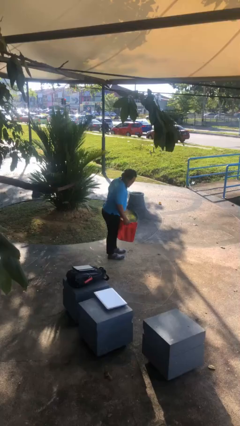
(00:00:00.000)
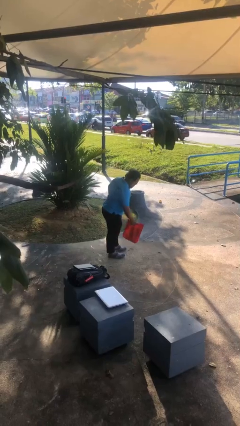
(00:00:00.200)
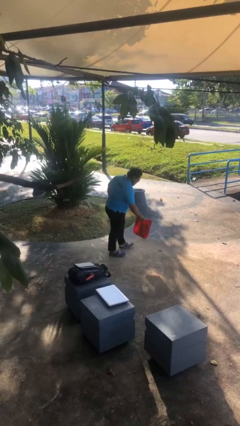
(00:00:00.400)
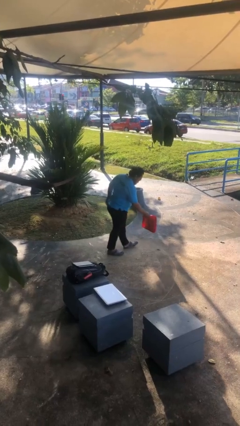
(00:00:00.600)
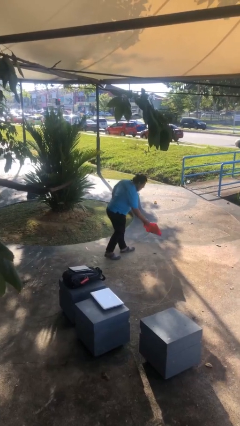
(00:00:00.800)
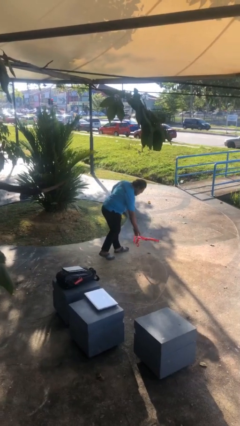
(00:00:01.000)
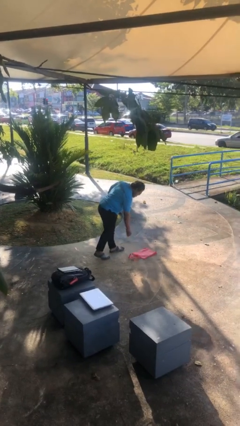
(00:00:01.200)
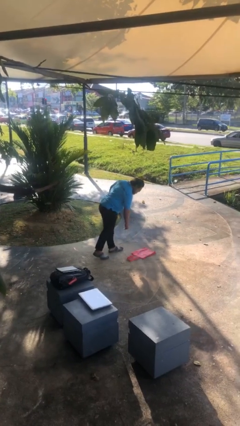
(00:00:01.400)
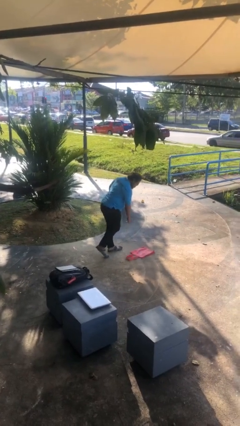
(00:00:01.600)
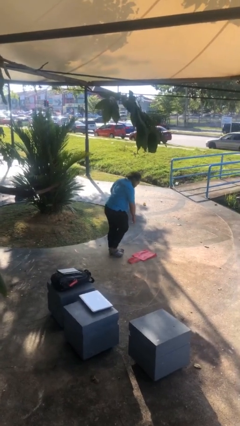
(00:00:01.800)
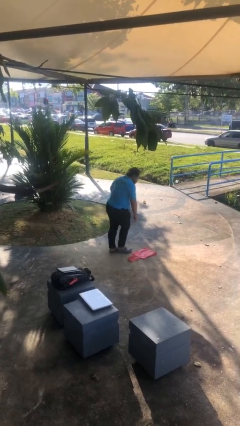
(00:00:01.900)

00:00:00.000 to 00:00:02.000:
person puts down object on floor

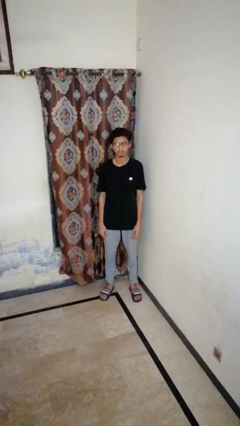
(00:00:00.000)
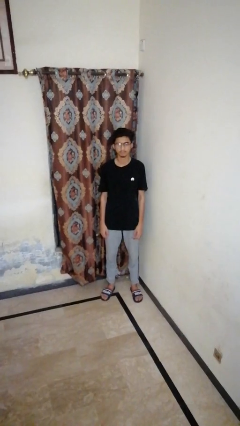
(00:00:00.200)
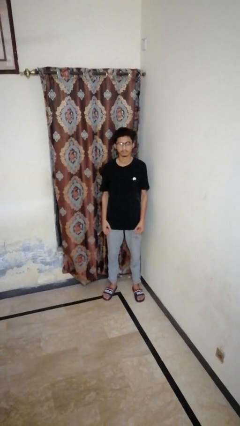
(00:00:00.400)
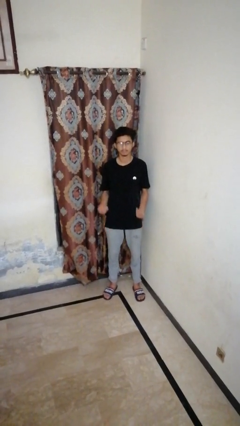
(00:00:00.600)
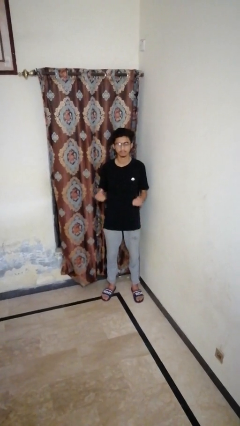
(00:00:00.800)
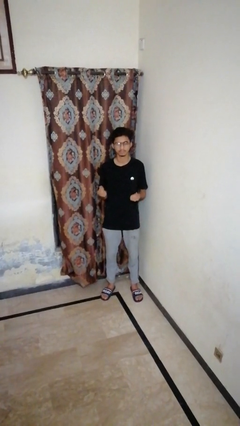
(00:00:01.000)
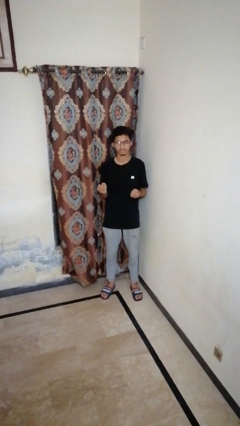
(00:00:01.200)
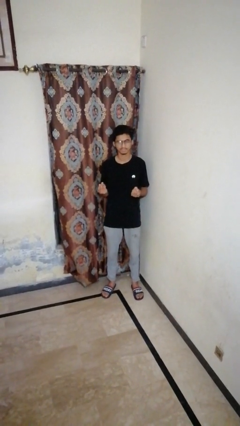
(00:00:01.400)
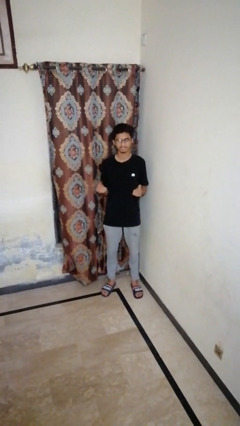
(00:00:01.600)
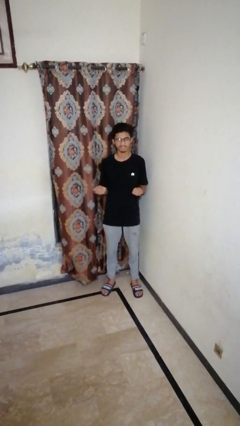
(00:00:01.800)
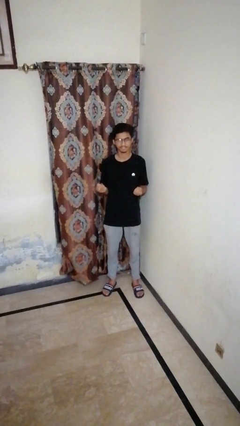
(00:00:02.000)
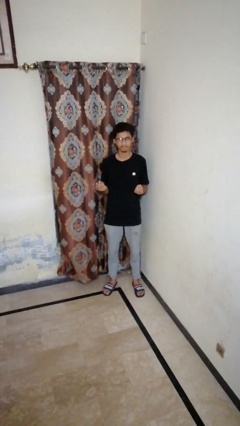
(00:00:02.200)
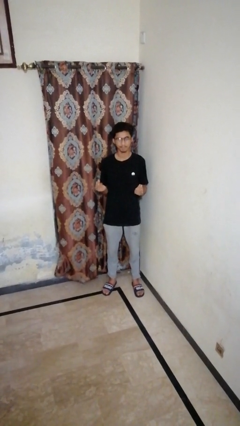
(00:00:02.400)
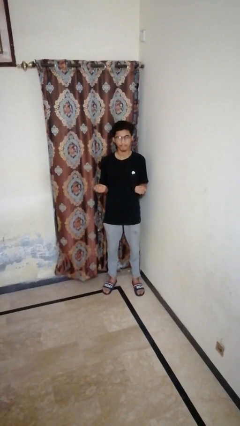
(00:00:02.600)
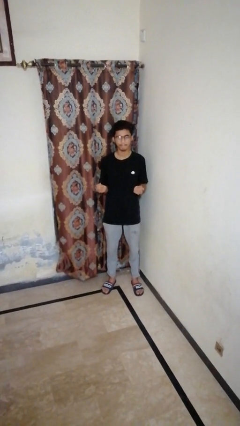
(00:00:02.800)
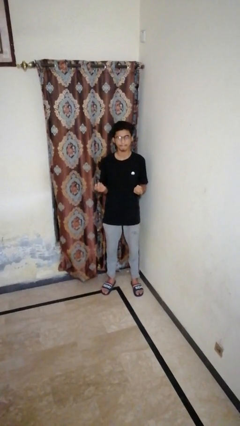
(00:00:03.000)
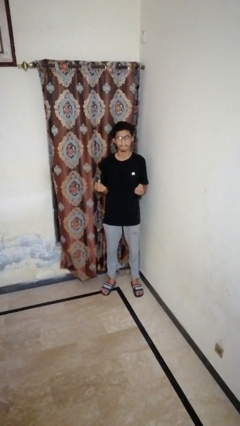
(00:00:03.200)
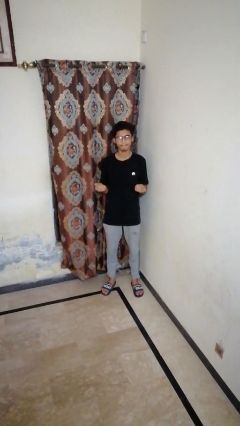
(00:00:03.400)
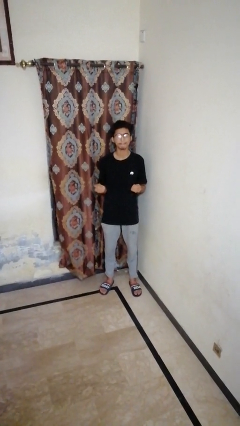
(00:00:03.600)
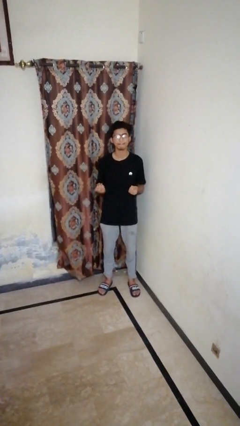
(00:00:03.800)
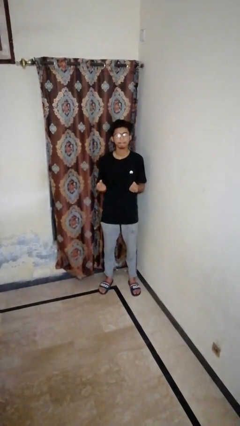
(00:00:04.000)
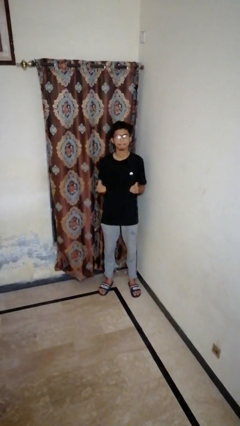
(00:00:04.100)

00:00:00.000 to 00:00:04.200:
person snaps fingers

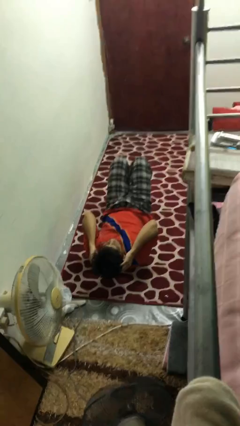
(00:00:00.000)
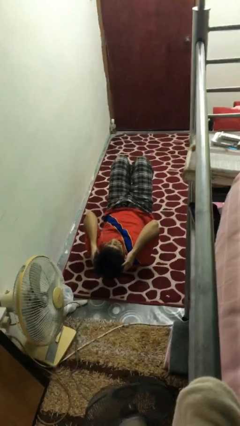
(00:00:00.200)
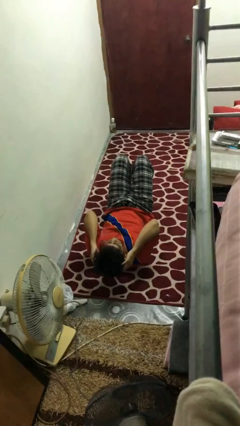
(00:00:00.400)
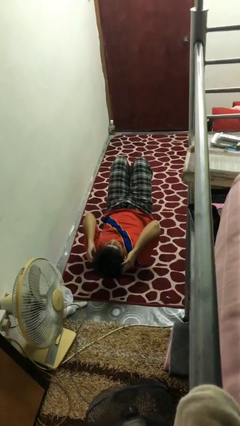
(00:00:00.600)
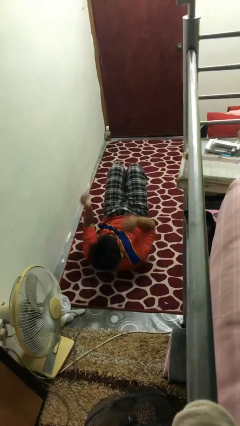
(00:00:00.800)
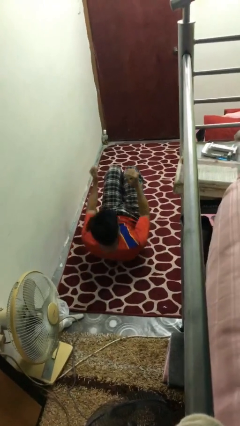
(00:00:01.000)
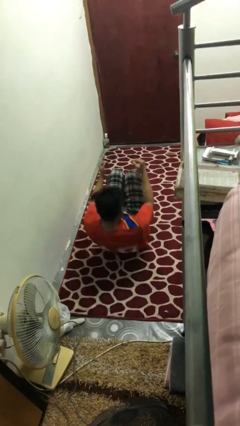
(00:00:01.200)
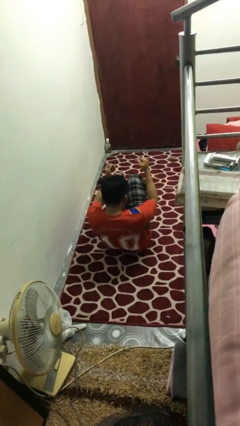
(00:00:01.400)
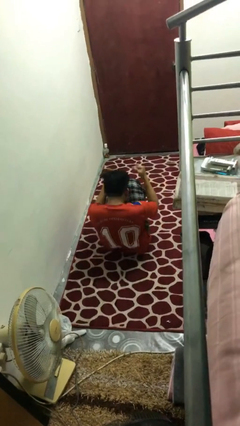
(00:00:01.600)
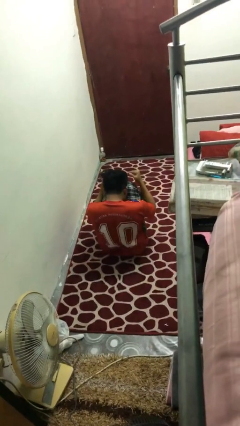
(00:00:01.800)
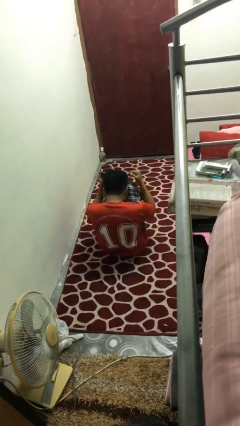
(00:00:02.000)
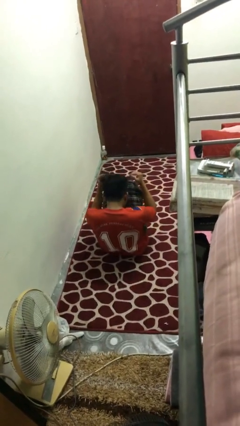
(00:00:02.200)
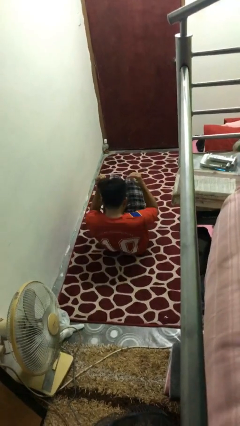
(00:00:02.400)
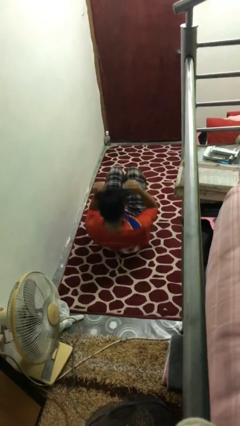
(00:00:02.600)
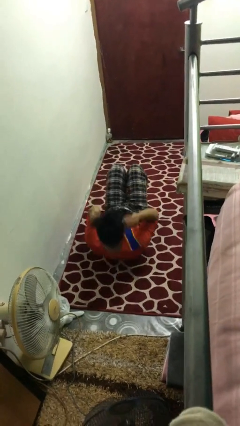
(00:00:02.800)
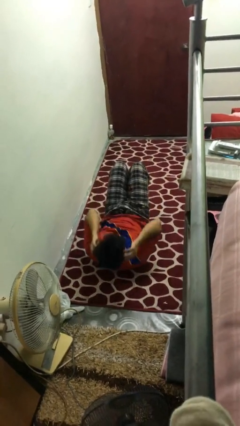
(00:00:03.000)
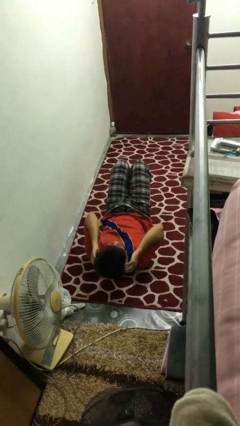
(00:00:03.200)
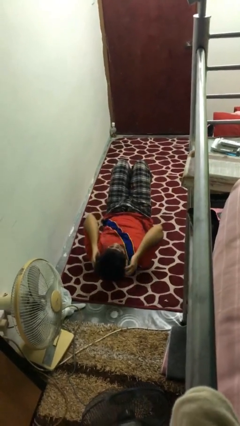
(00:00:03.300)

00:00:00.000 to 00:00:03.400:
person exercises with situp

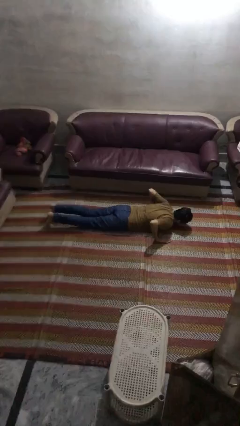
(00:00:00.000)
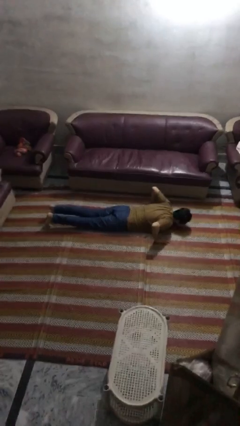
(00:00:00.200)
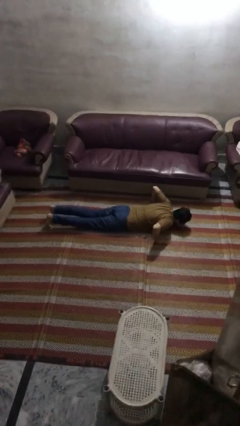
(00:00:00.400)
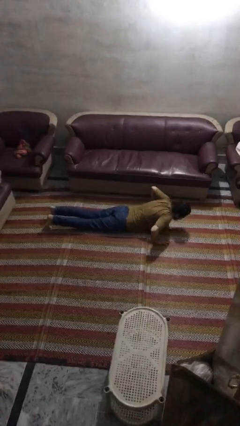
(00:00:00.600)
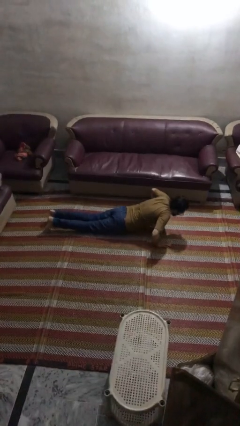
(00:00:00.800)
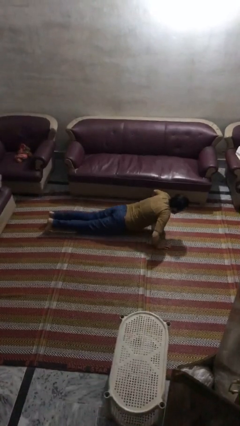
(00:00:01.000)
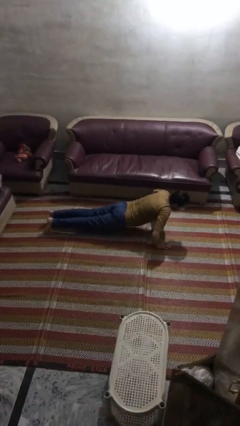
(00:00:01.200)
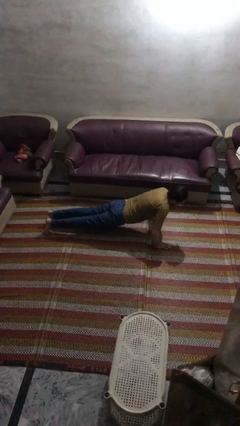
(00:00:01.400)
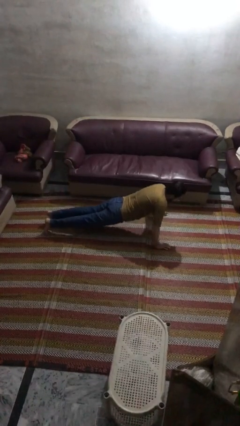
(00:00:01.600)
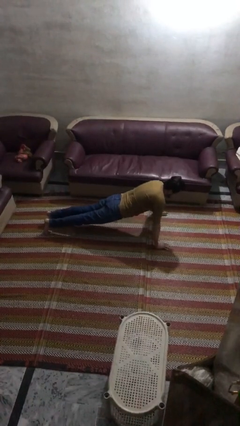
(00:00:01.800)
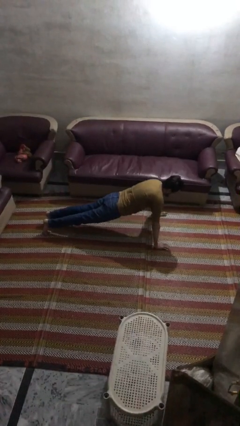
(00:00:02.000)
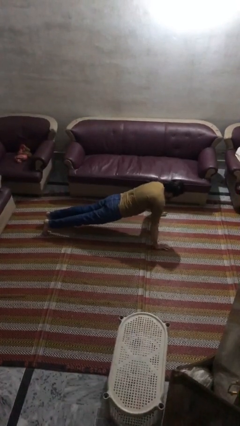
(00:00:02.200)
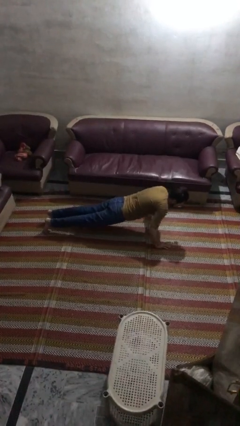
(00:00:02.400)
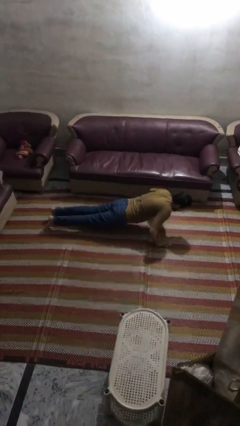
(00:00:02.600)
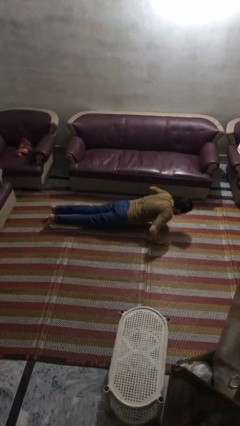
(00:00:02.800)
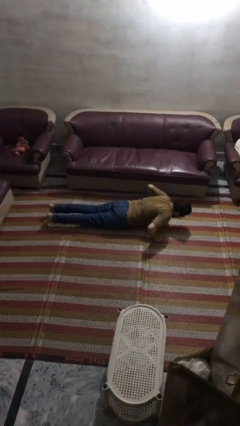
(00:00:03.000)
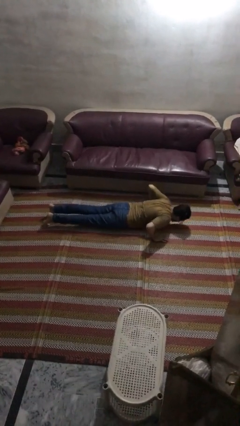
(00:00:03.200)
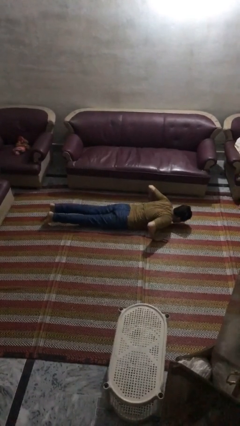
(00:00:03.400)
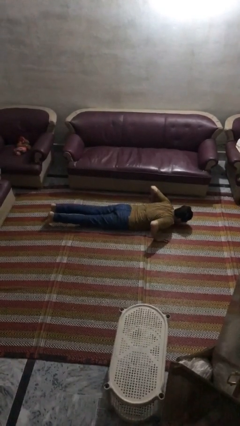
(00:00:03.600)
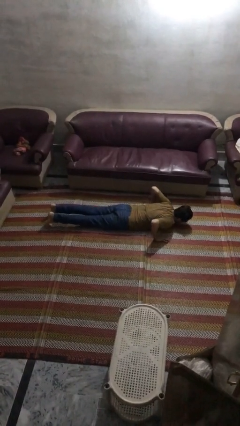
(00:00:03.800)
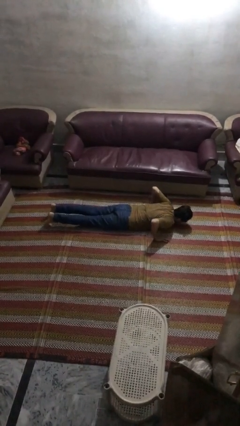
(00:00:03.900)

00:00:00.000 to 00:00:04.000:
person exercises with pushup

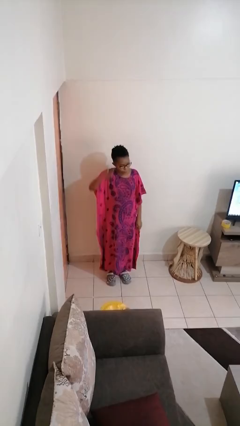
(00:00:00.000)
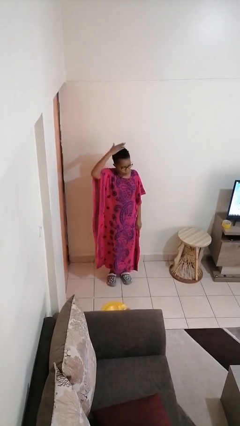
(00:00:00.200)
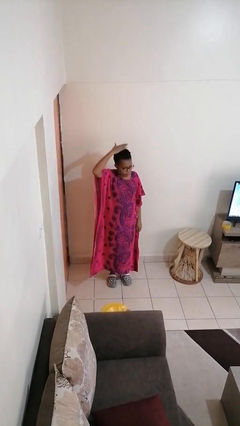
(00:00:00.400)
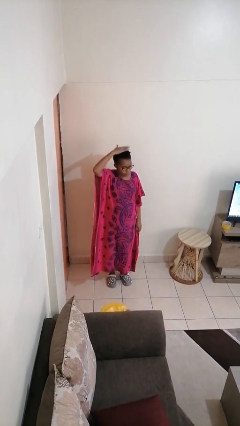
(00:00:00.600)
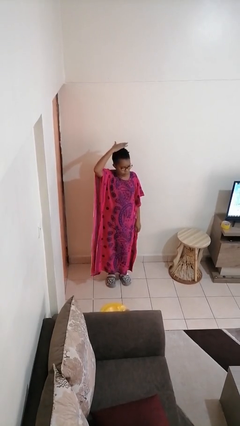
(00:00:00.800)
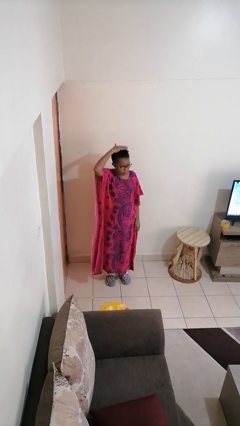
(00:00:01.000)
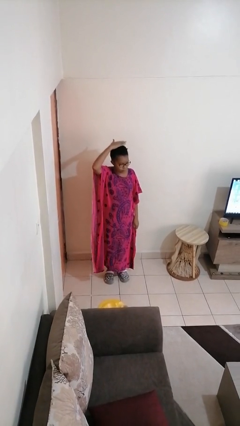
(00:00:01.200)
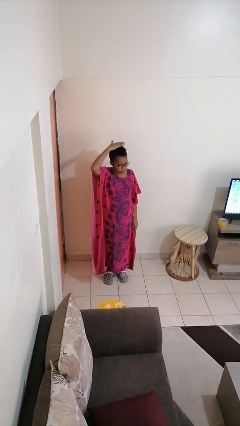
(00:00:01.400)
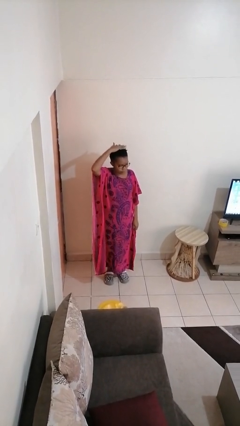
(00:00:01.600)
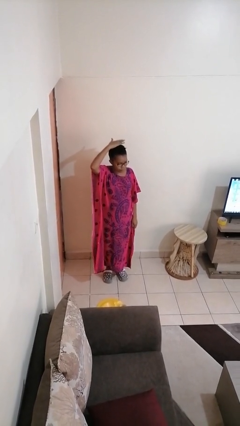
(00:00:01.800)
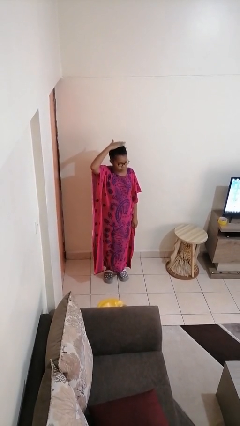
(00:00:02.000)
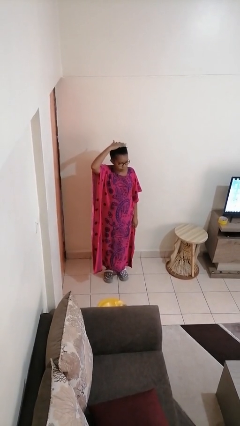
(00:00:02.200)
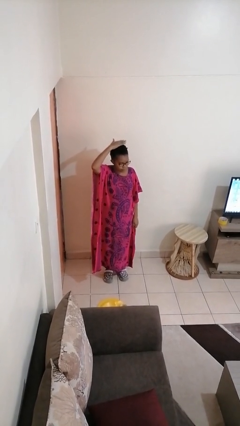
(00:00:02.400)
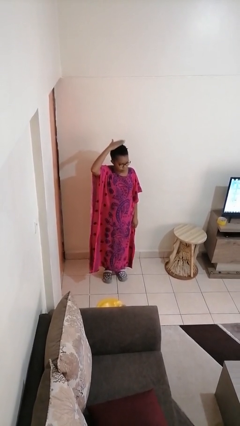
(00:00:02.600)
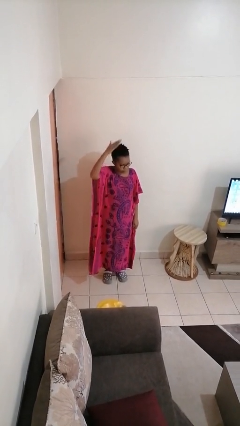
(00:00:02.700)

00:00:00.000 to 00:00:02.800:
person pats head

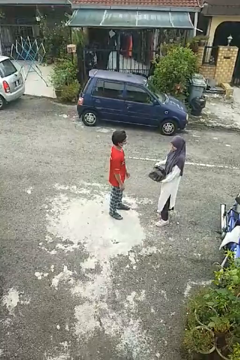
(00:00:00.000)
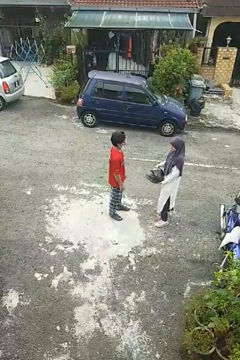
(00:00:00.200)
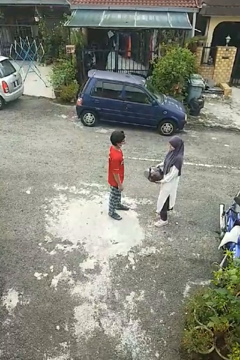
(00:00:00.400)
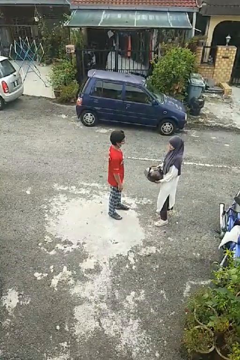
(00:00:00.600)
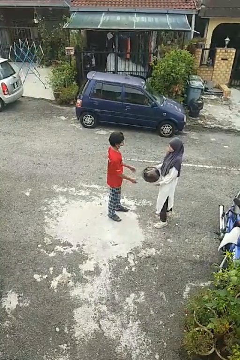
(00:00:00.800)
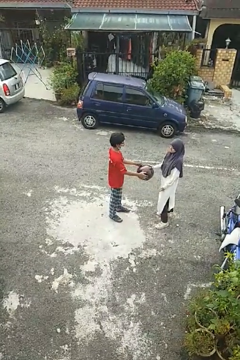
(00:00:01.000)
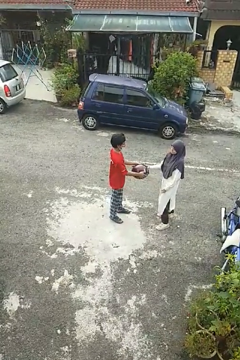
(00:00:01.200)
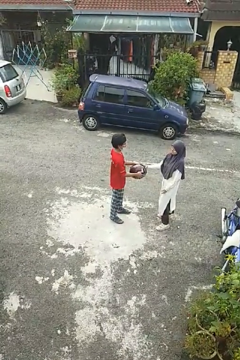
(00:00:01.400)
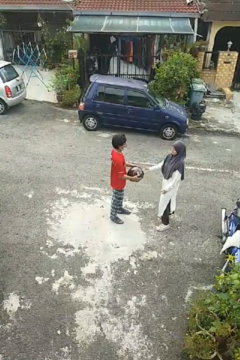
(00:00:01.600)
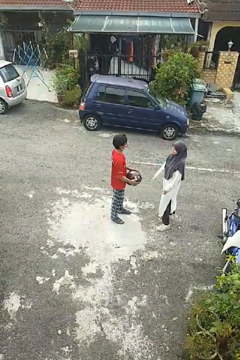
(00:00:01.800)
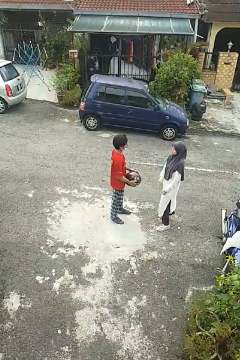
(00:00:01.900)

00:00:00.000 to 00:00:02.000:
person transfers object to person
